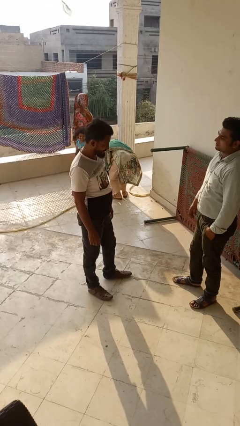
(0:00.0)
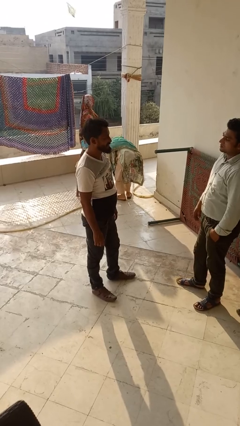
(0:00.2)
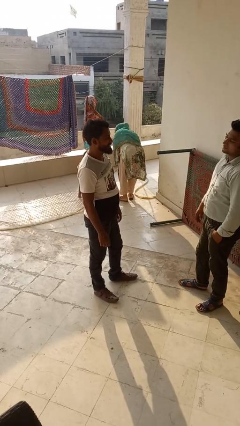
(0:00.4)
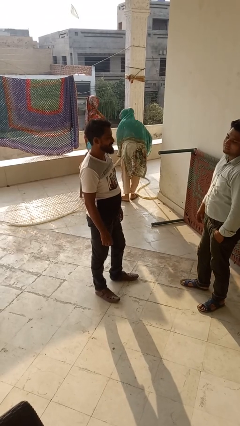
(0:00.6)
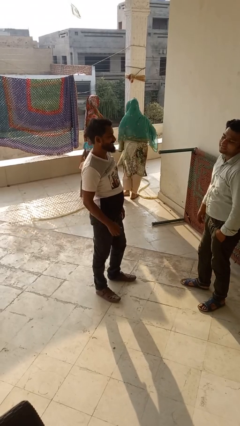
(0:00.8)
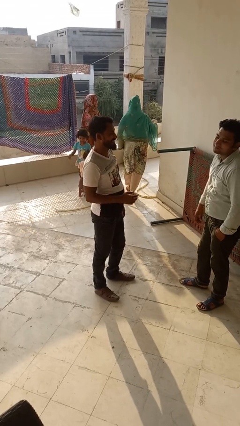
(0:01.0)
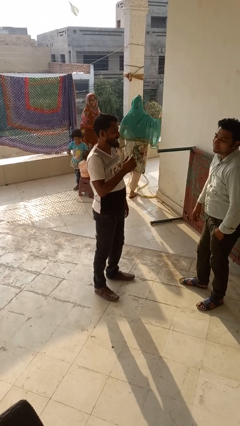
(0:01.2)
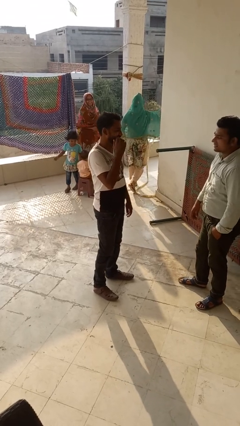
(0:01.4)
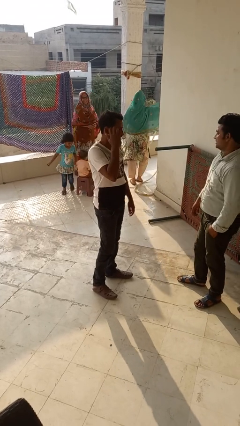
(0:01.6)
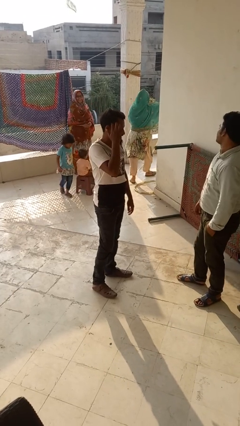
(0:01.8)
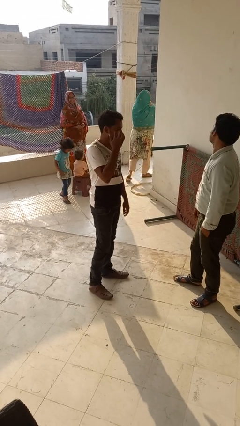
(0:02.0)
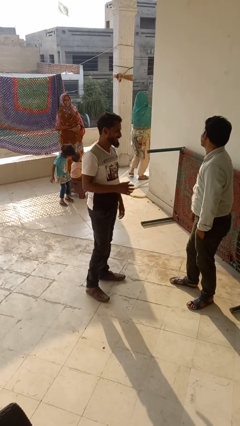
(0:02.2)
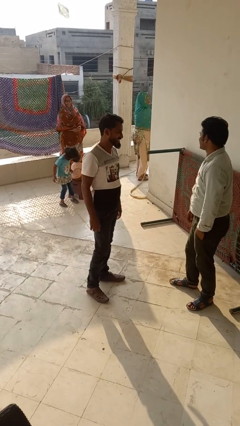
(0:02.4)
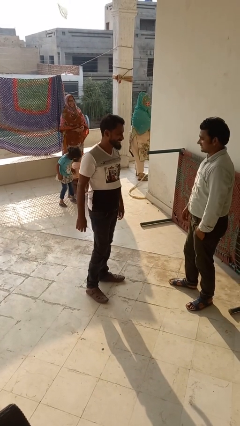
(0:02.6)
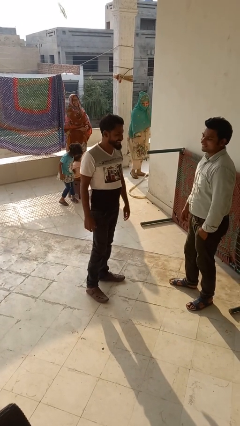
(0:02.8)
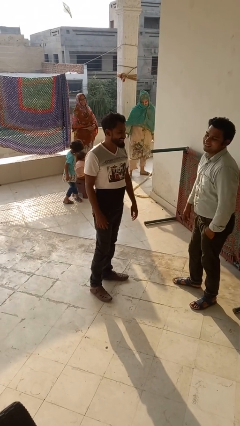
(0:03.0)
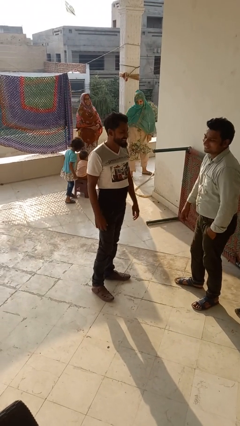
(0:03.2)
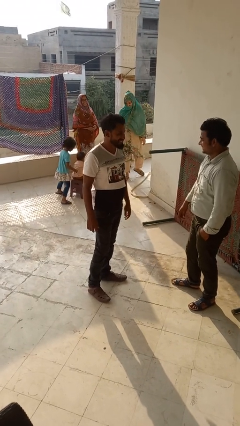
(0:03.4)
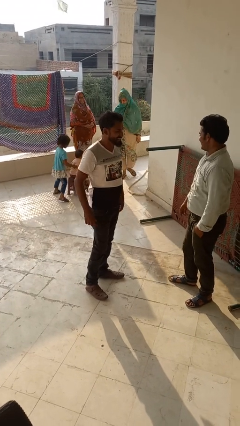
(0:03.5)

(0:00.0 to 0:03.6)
person talks to person

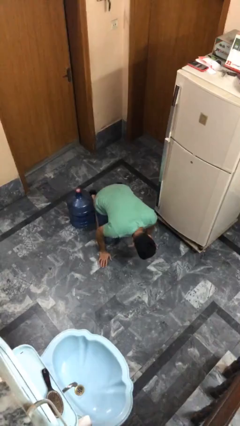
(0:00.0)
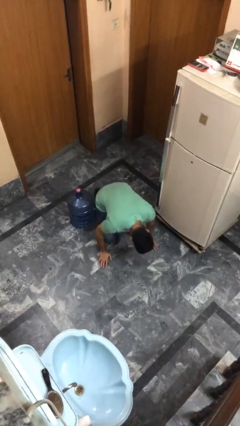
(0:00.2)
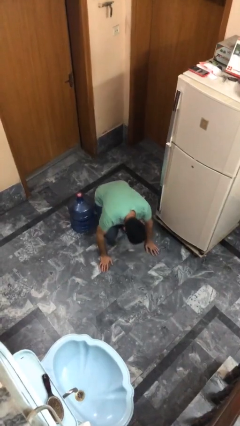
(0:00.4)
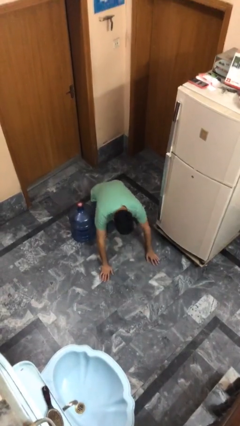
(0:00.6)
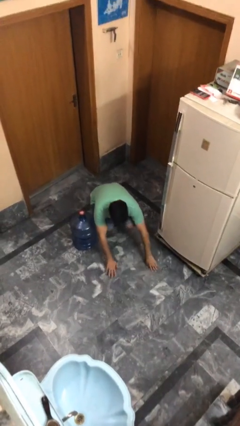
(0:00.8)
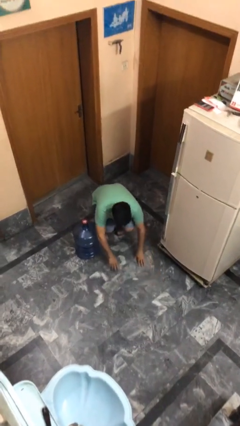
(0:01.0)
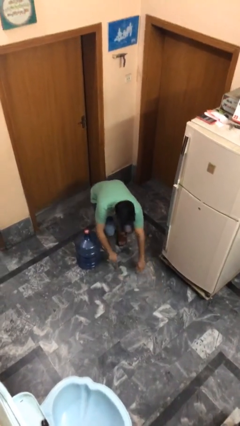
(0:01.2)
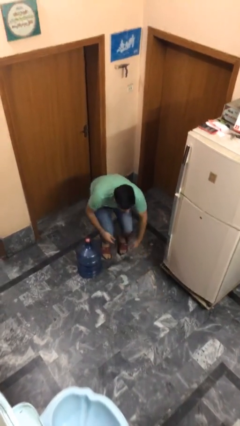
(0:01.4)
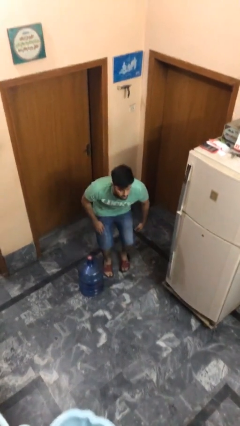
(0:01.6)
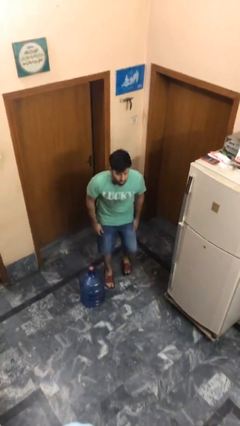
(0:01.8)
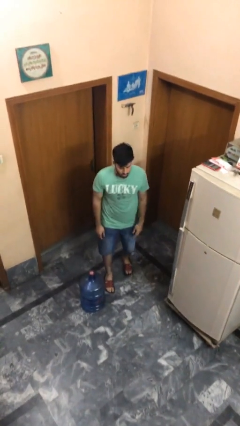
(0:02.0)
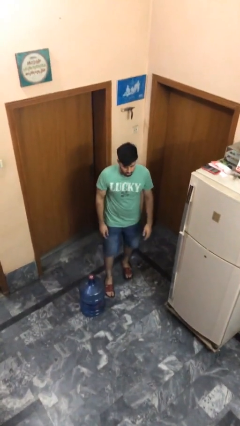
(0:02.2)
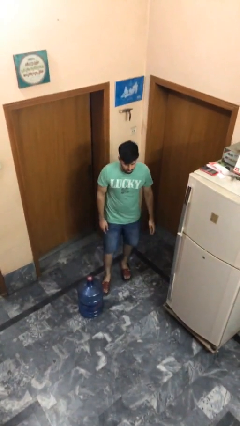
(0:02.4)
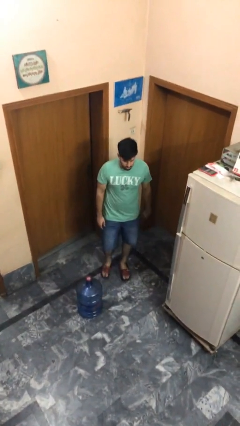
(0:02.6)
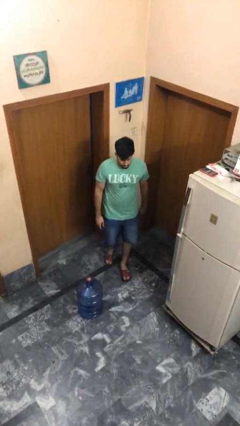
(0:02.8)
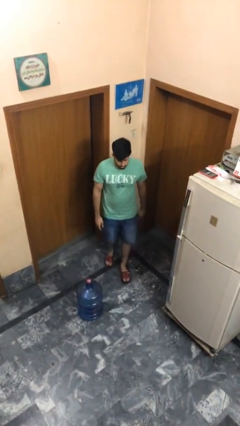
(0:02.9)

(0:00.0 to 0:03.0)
person stands up from floor

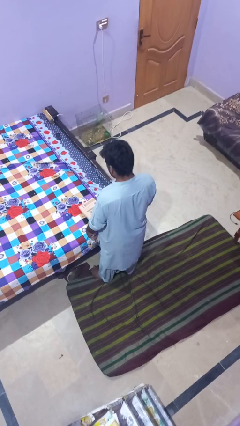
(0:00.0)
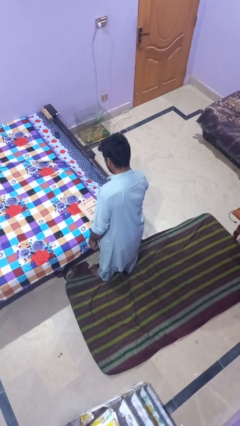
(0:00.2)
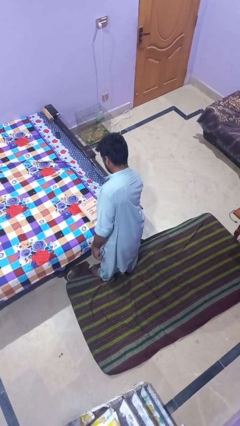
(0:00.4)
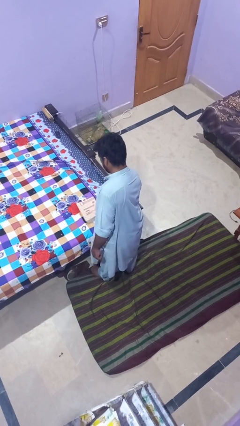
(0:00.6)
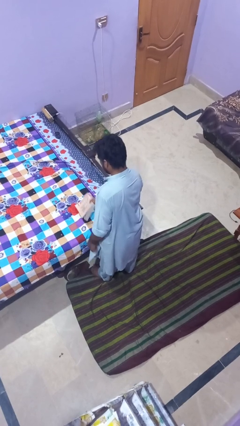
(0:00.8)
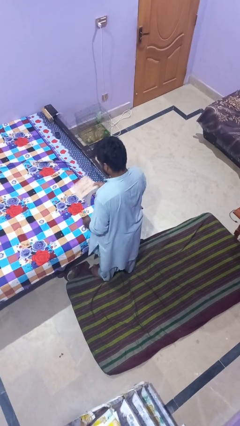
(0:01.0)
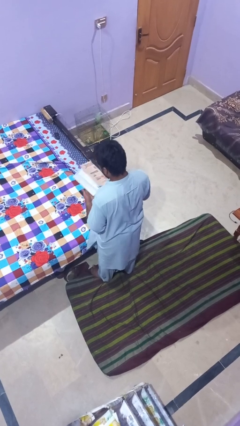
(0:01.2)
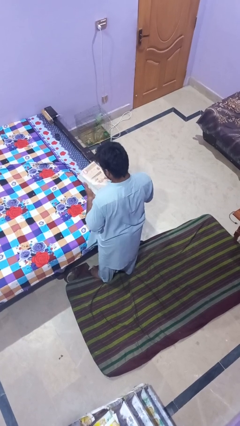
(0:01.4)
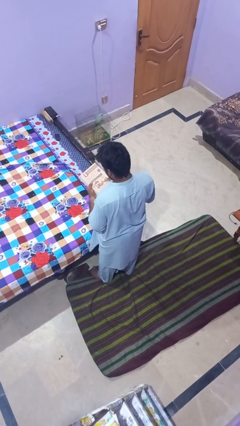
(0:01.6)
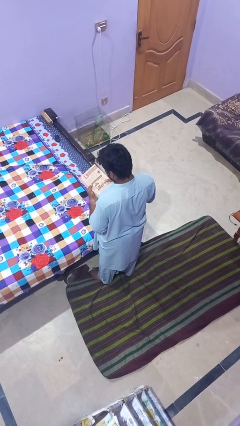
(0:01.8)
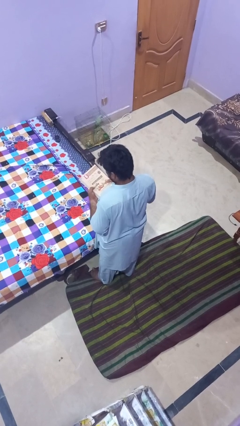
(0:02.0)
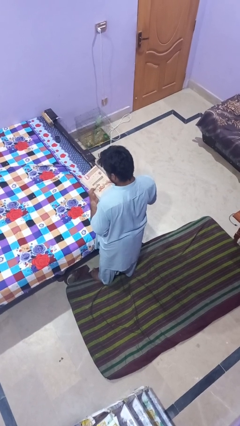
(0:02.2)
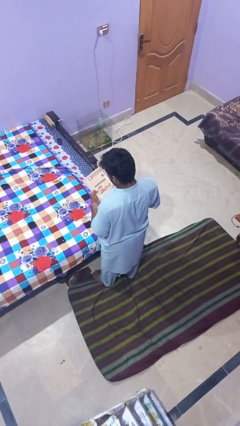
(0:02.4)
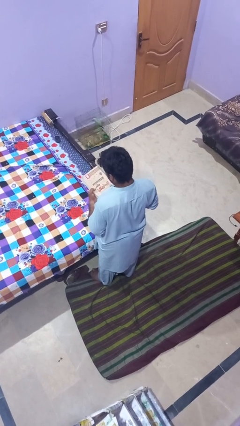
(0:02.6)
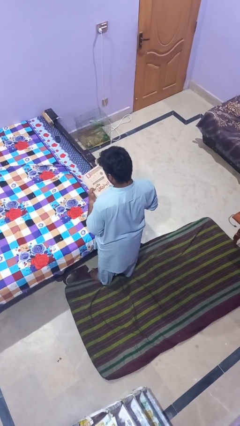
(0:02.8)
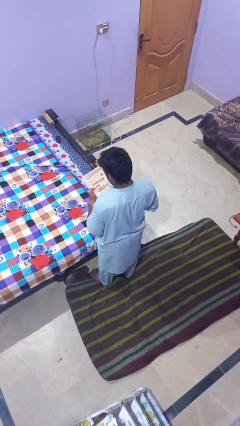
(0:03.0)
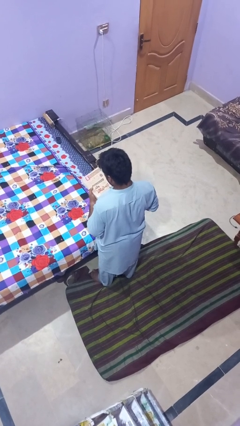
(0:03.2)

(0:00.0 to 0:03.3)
person picks up object from bed

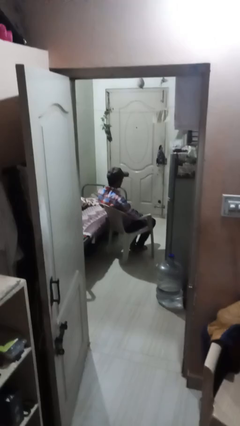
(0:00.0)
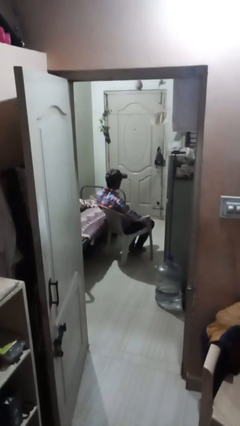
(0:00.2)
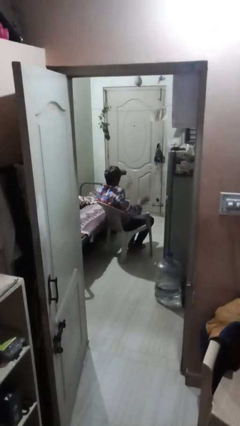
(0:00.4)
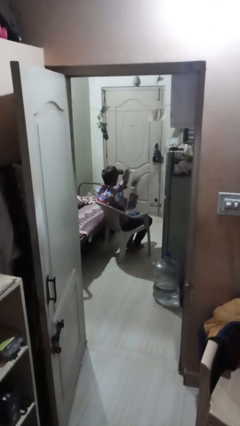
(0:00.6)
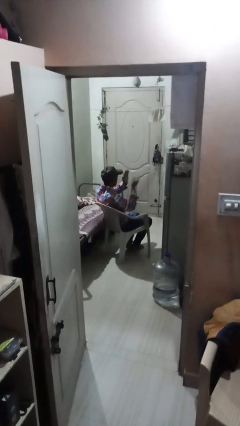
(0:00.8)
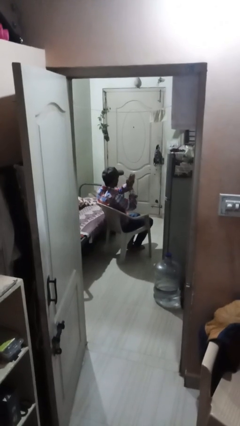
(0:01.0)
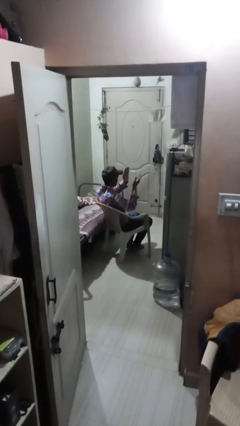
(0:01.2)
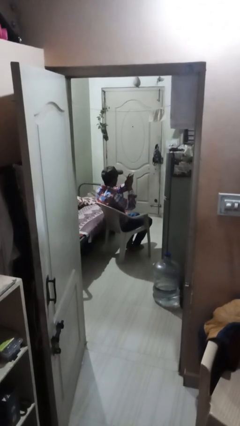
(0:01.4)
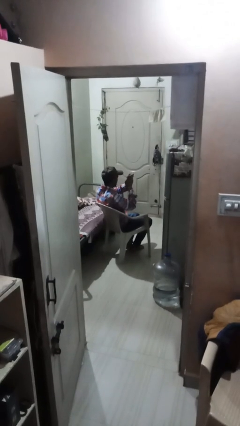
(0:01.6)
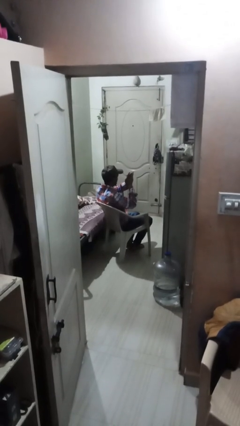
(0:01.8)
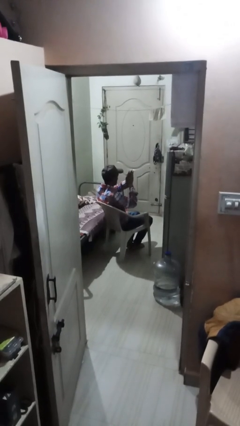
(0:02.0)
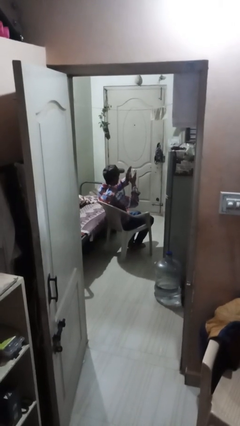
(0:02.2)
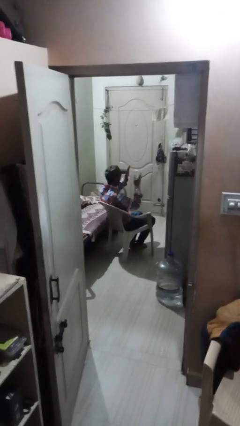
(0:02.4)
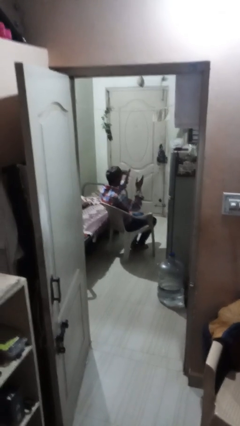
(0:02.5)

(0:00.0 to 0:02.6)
person claps hands

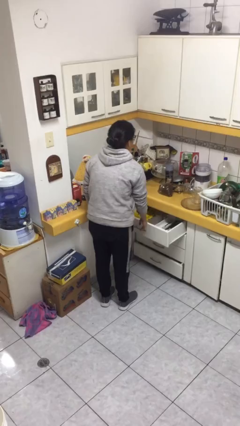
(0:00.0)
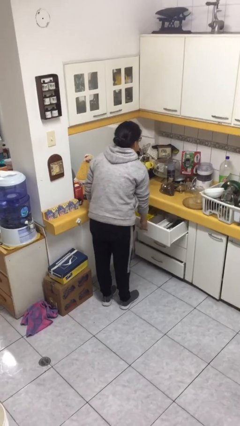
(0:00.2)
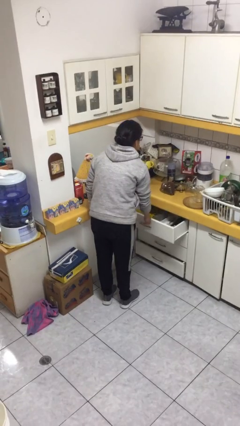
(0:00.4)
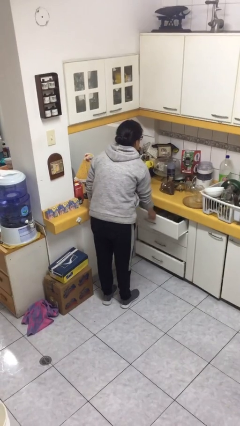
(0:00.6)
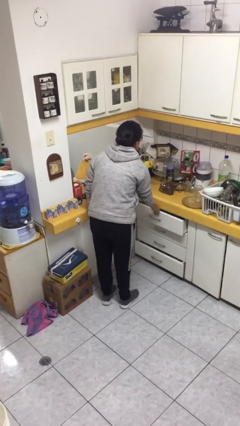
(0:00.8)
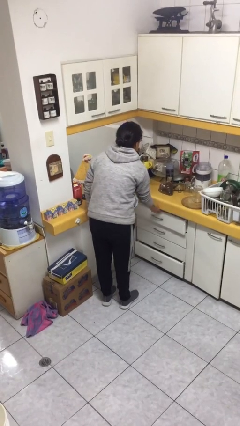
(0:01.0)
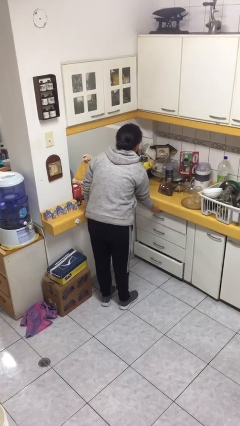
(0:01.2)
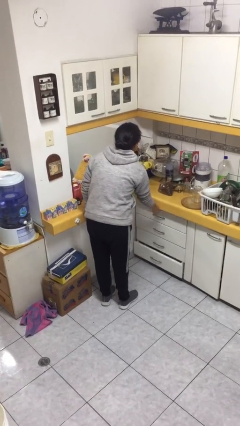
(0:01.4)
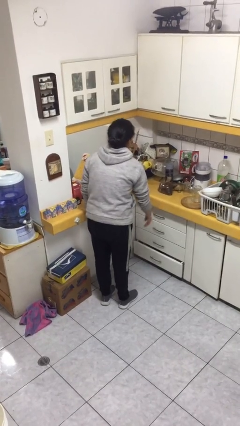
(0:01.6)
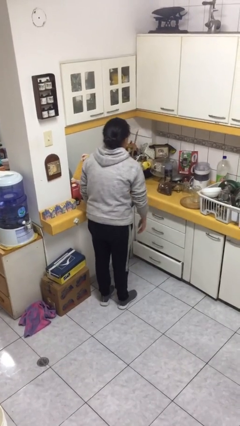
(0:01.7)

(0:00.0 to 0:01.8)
person closes kitchen drawer

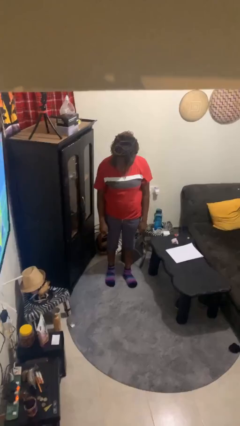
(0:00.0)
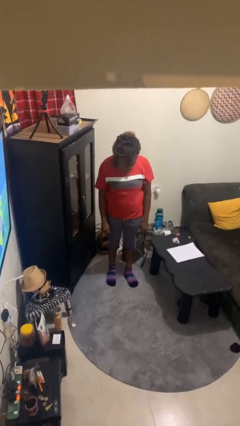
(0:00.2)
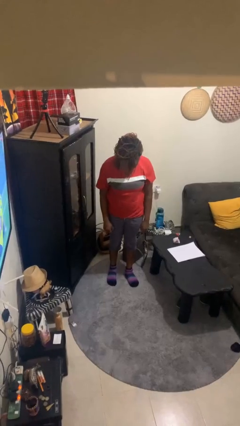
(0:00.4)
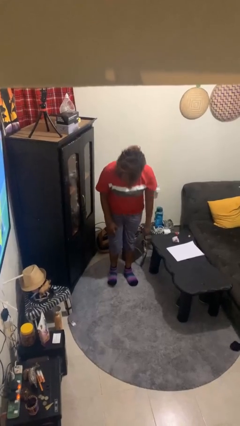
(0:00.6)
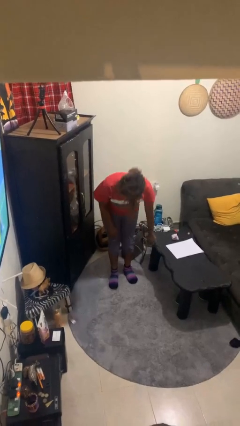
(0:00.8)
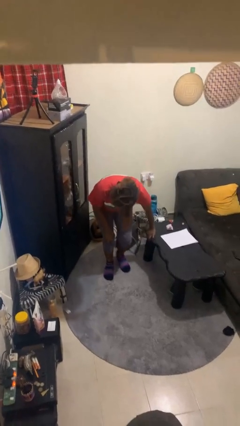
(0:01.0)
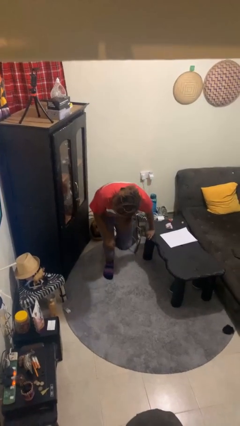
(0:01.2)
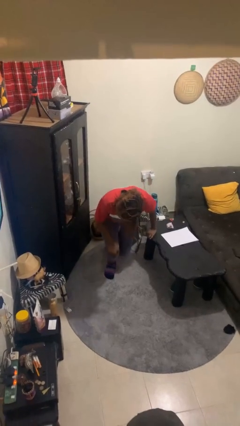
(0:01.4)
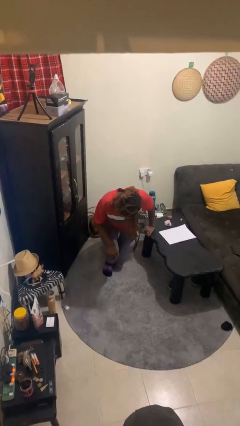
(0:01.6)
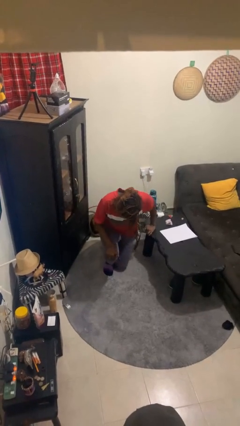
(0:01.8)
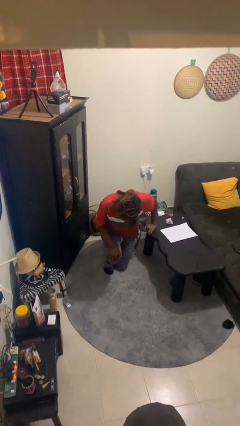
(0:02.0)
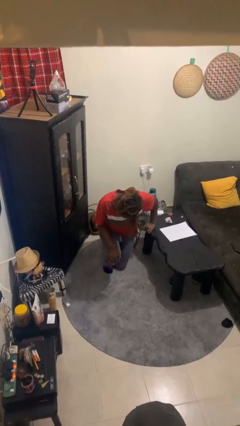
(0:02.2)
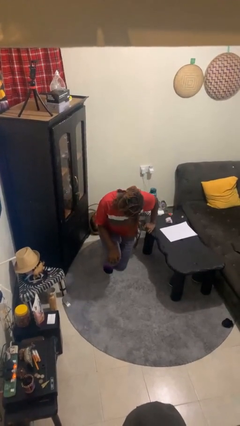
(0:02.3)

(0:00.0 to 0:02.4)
person kneels

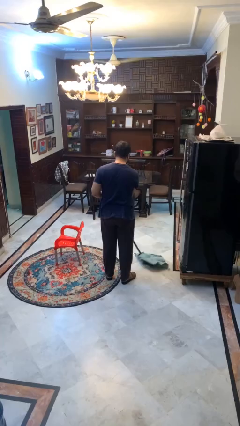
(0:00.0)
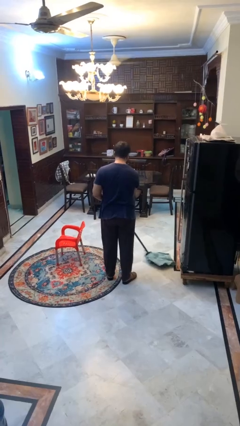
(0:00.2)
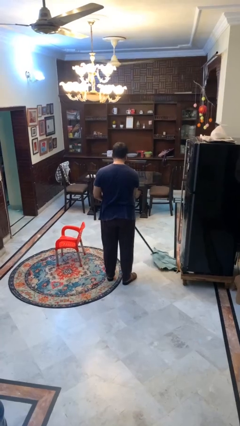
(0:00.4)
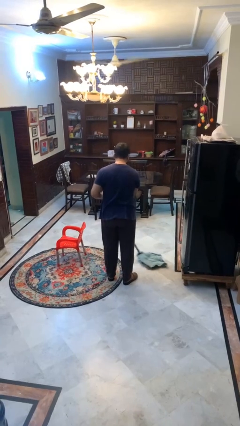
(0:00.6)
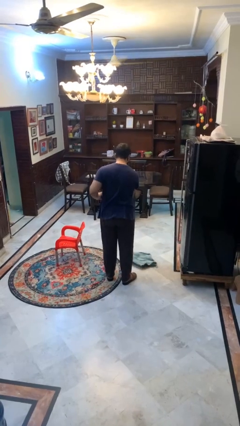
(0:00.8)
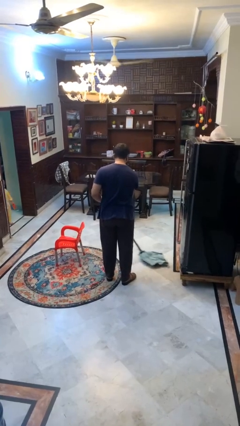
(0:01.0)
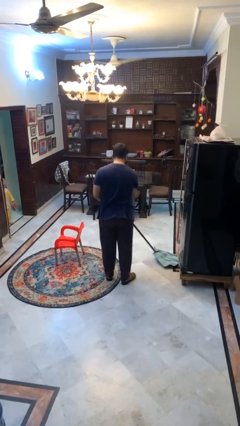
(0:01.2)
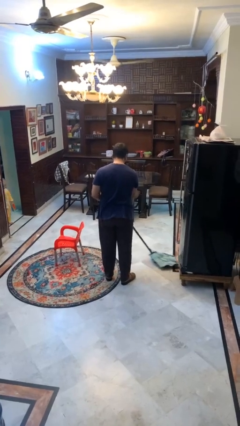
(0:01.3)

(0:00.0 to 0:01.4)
person mops
